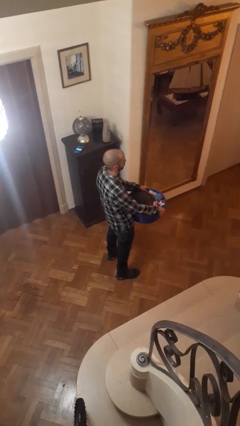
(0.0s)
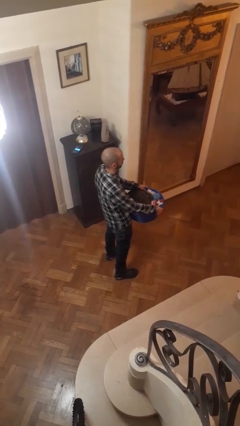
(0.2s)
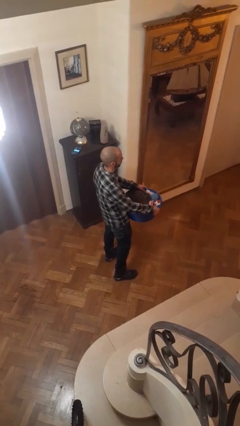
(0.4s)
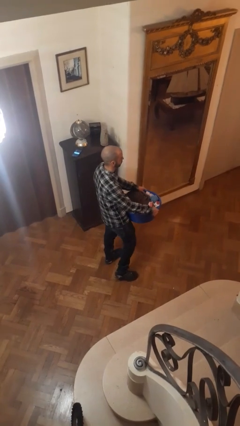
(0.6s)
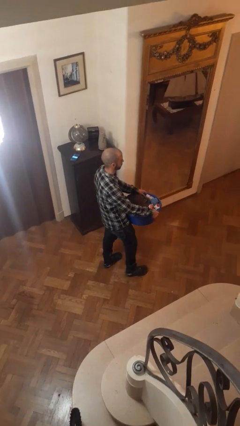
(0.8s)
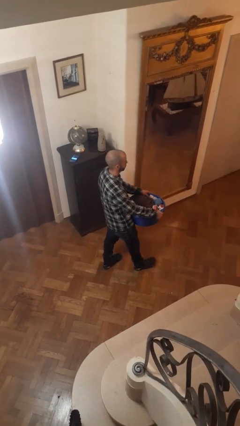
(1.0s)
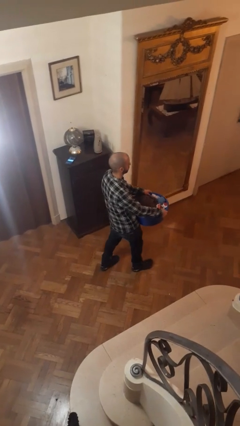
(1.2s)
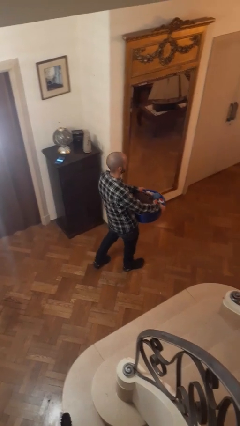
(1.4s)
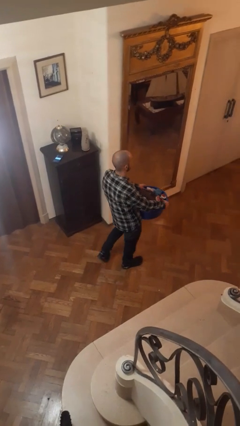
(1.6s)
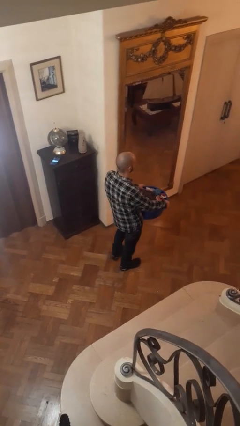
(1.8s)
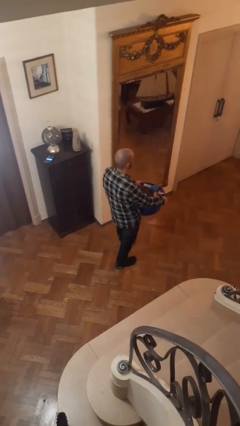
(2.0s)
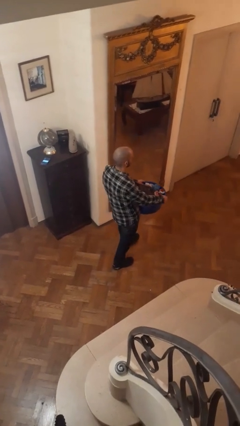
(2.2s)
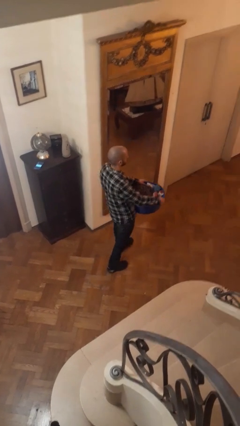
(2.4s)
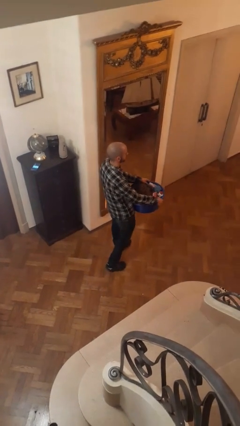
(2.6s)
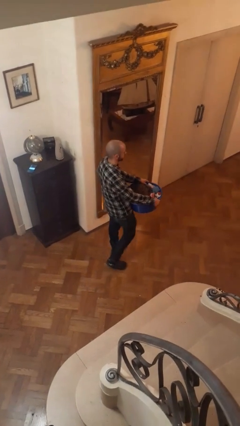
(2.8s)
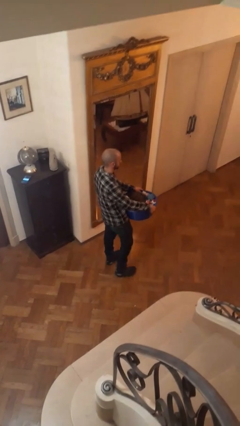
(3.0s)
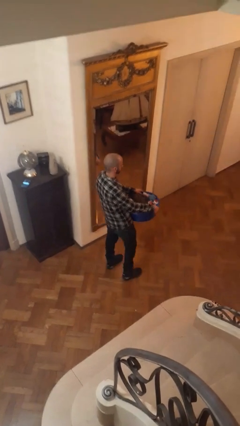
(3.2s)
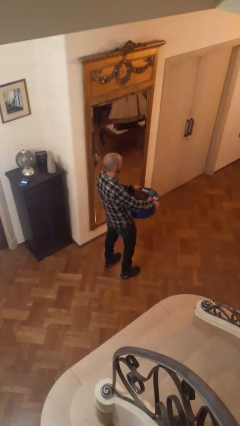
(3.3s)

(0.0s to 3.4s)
person carries laundry basket

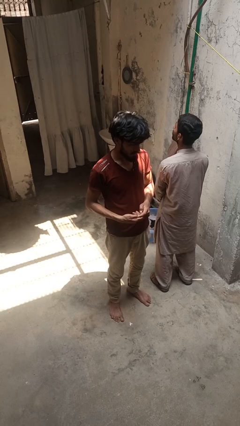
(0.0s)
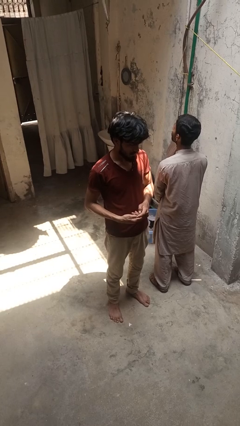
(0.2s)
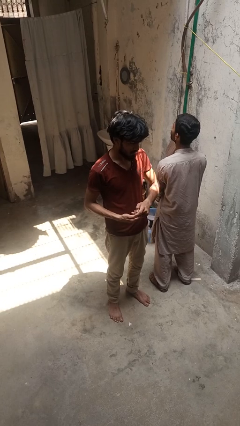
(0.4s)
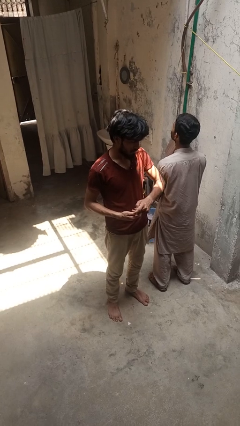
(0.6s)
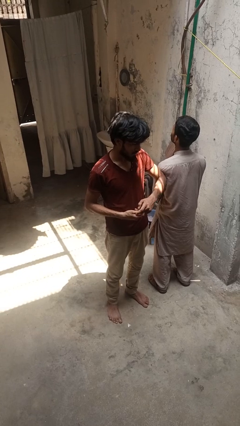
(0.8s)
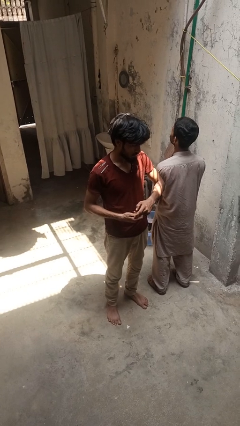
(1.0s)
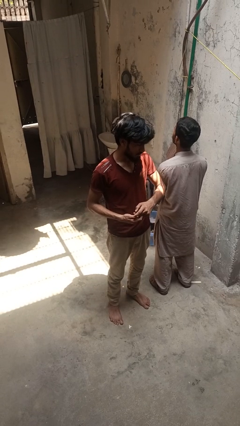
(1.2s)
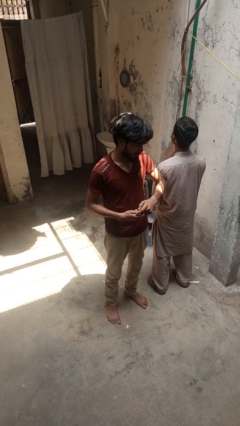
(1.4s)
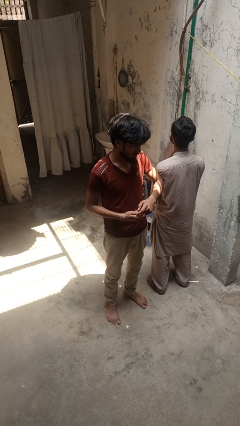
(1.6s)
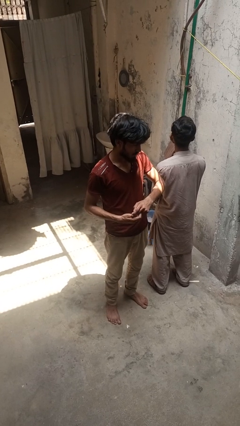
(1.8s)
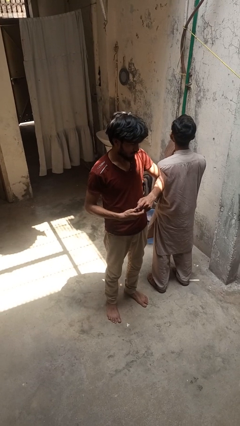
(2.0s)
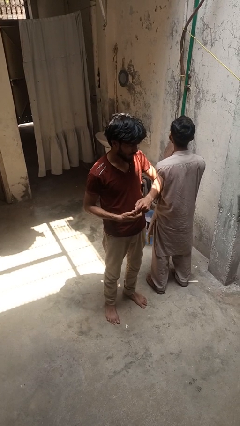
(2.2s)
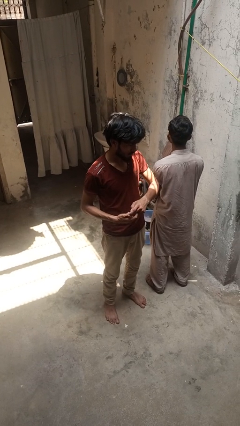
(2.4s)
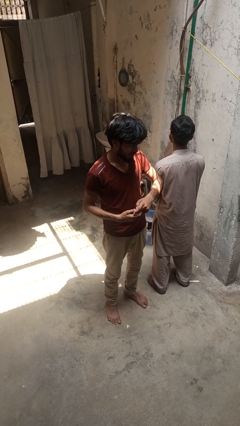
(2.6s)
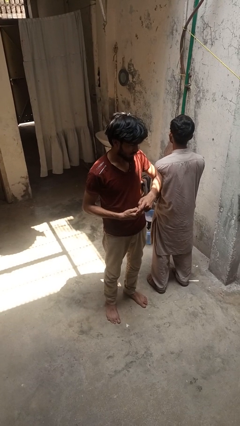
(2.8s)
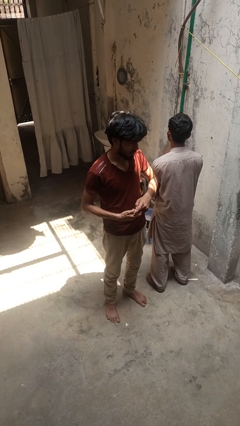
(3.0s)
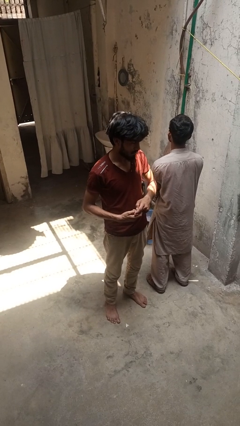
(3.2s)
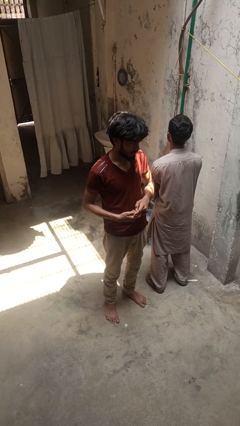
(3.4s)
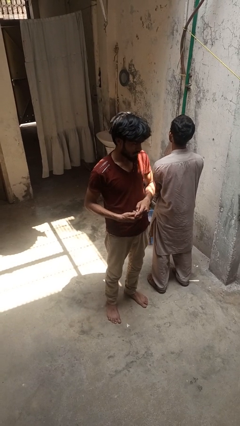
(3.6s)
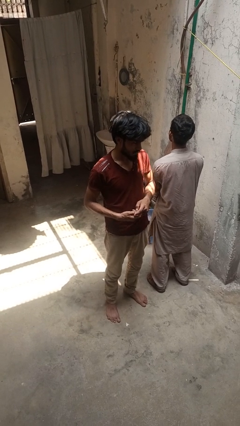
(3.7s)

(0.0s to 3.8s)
person nudges person with elbow

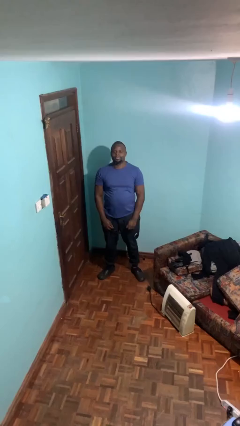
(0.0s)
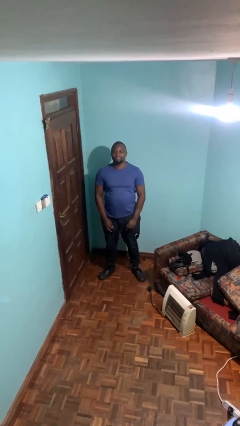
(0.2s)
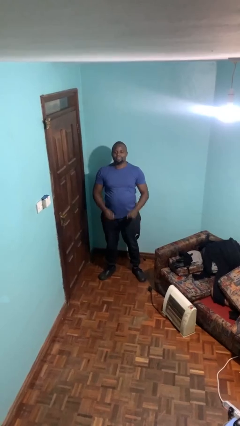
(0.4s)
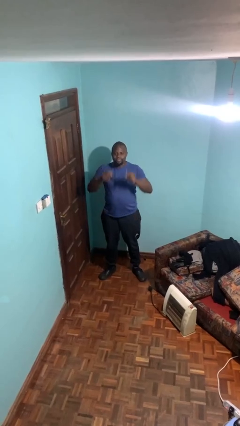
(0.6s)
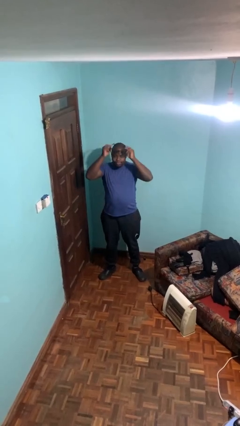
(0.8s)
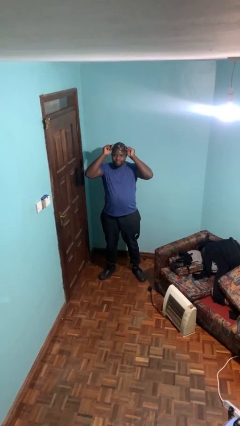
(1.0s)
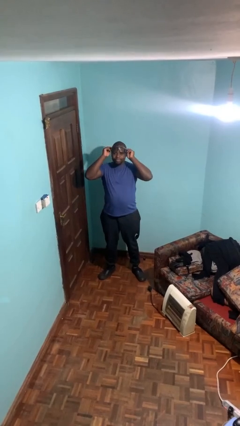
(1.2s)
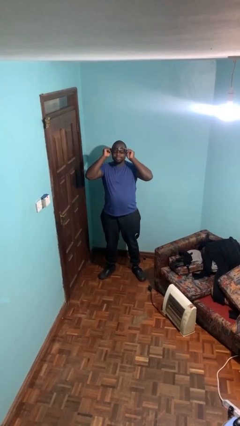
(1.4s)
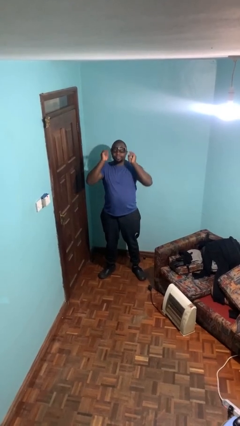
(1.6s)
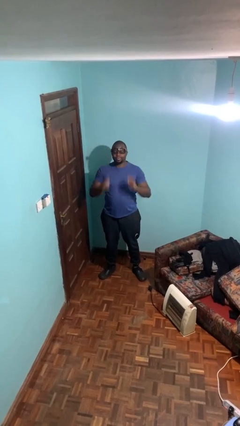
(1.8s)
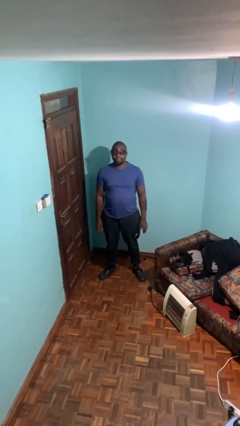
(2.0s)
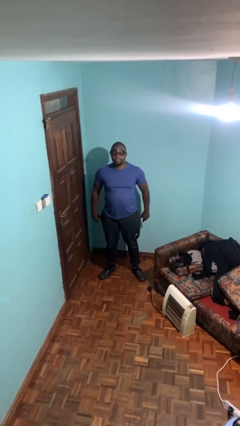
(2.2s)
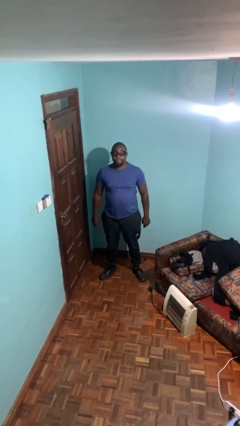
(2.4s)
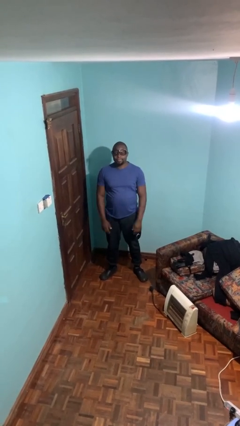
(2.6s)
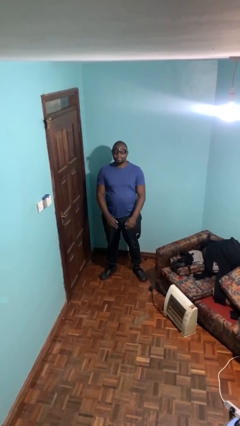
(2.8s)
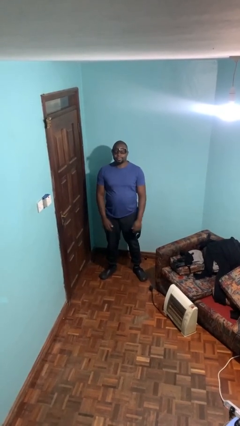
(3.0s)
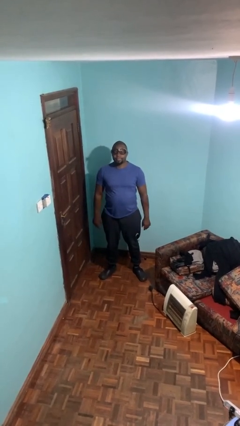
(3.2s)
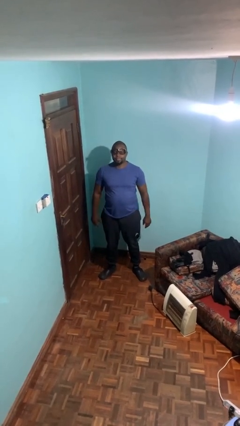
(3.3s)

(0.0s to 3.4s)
person puts on glasses

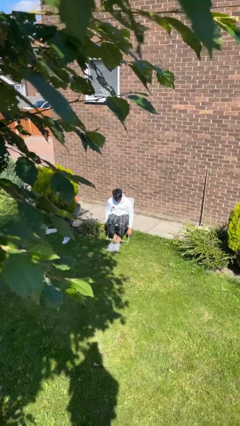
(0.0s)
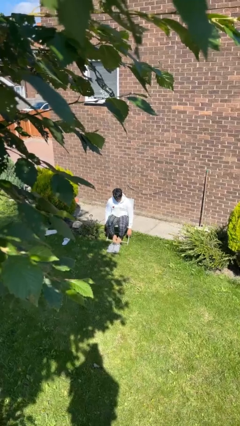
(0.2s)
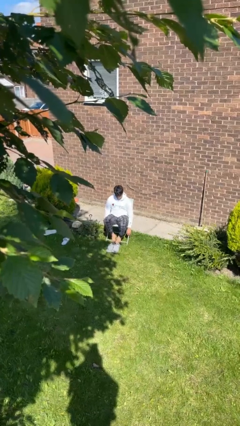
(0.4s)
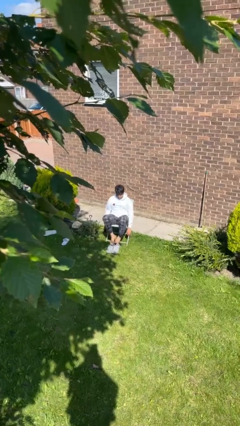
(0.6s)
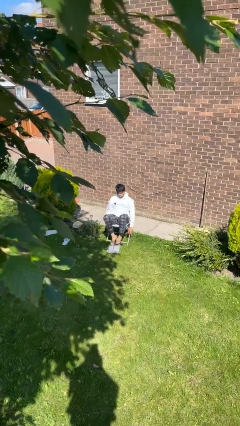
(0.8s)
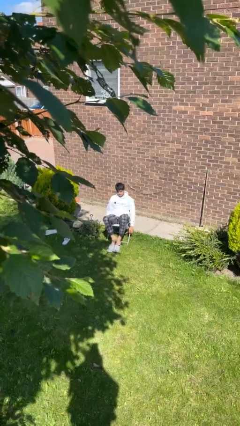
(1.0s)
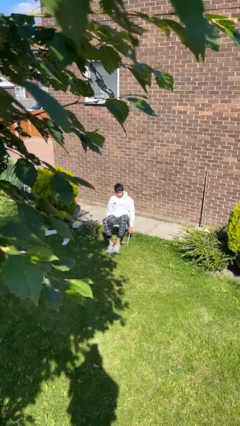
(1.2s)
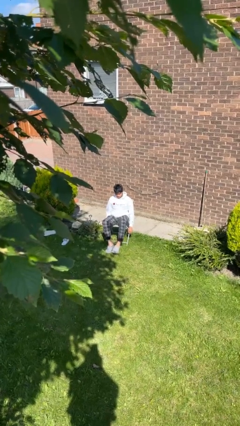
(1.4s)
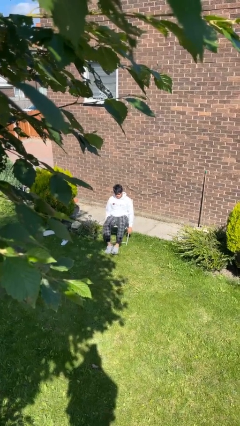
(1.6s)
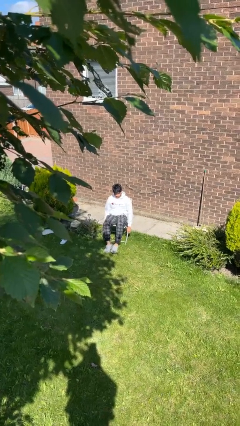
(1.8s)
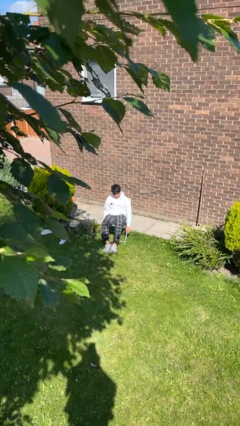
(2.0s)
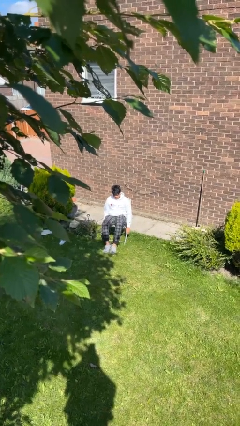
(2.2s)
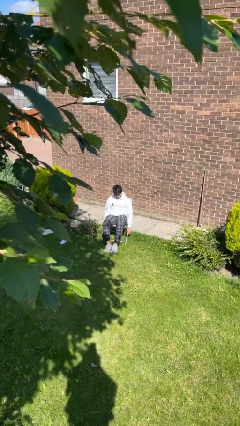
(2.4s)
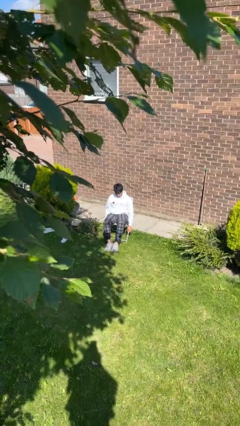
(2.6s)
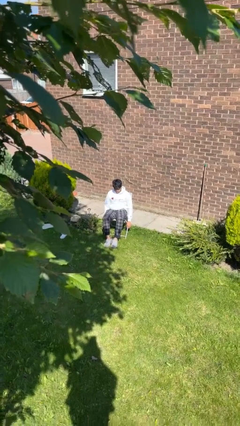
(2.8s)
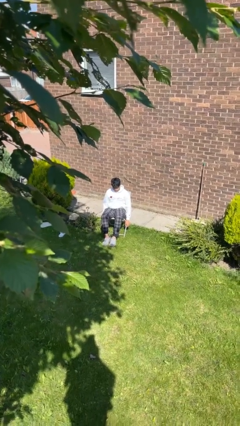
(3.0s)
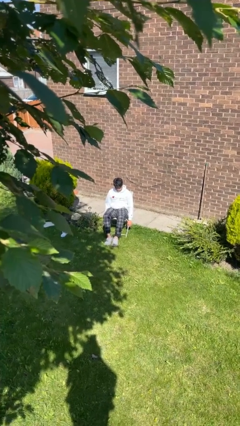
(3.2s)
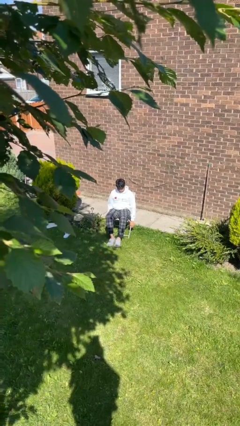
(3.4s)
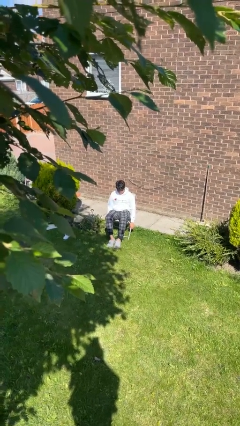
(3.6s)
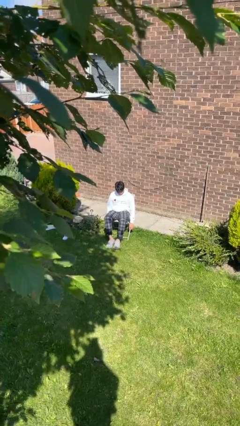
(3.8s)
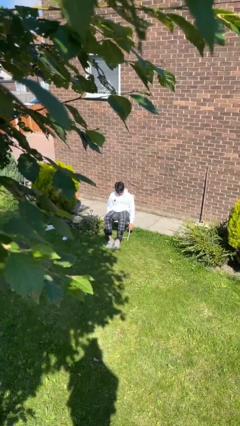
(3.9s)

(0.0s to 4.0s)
person puts on shoes

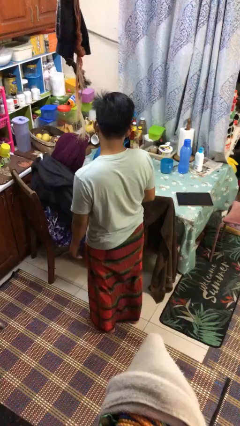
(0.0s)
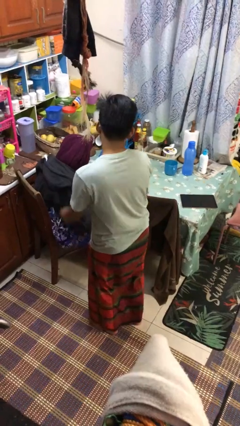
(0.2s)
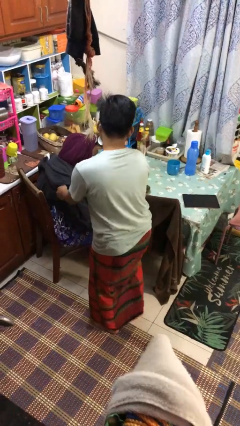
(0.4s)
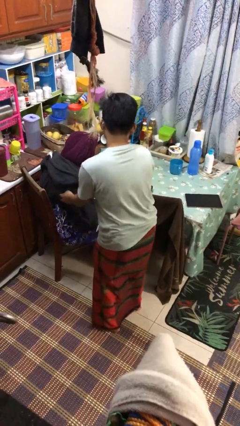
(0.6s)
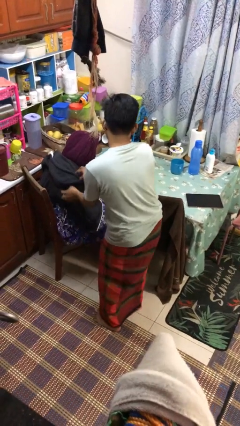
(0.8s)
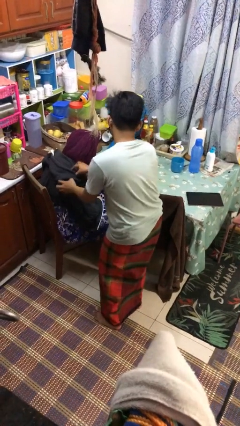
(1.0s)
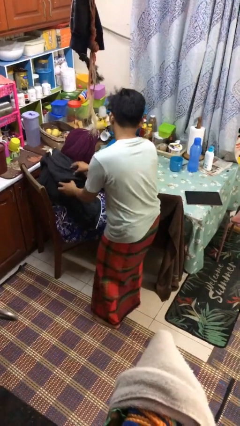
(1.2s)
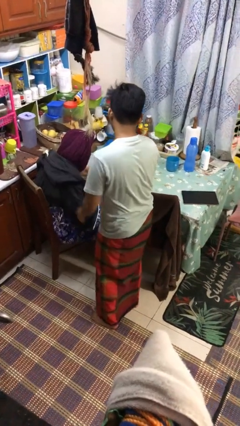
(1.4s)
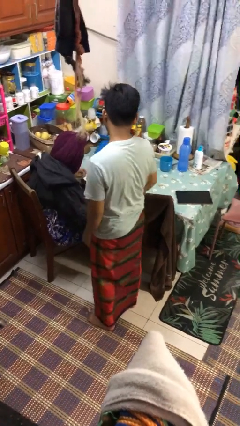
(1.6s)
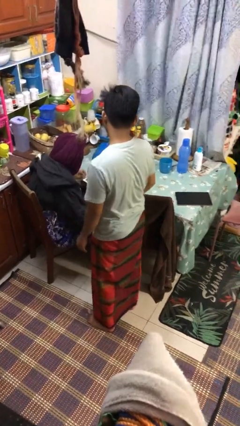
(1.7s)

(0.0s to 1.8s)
person tickles person

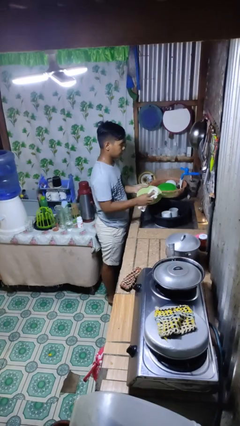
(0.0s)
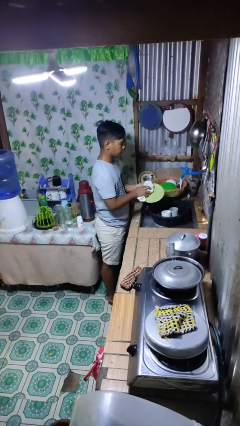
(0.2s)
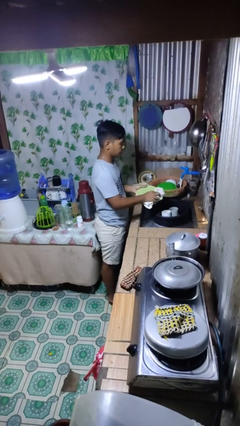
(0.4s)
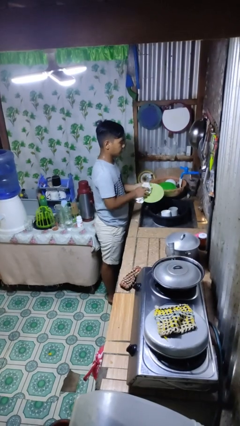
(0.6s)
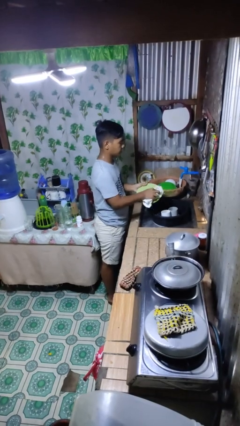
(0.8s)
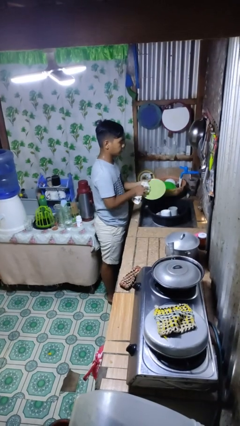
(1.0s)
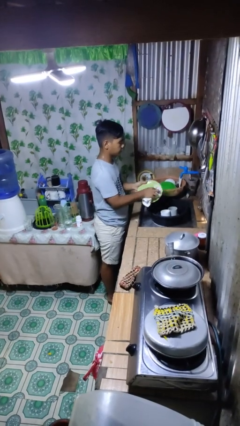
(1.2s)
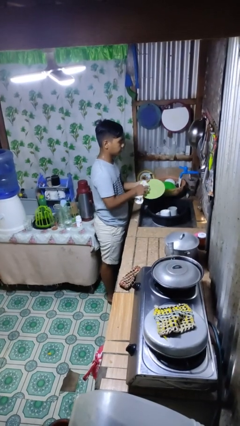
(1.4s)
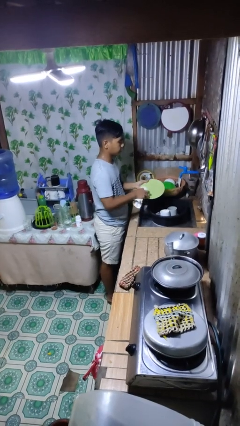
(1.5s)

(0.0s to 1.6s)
person dries dish
